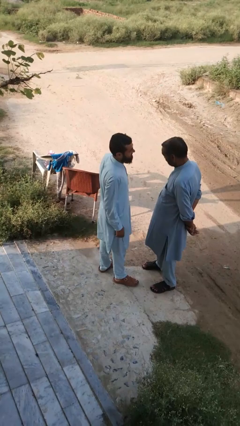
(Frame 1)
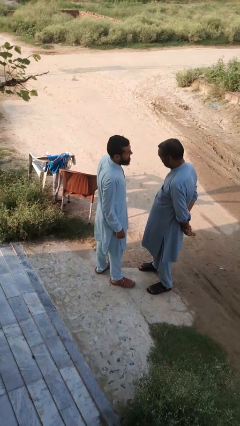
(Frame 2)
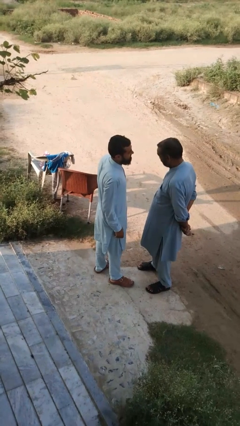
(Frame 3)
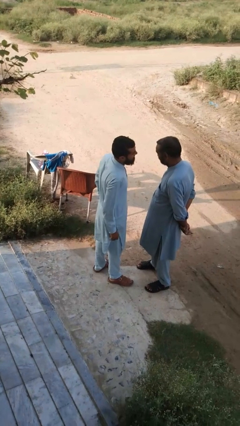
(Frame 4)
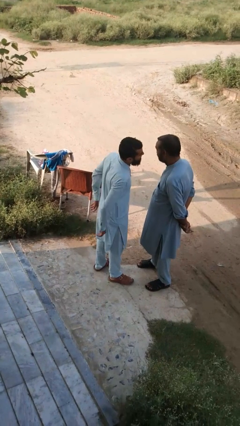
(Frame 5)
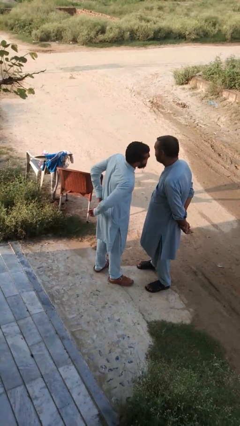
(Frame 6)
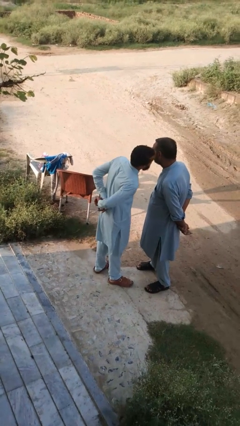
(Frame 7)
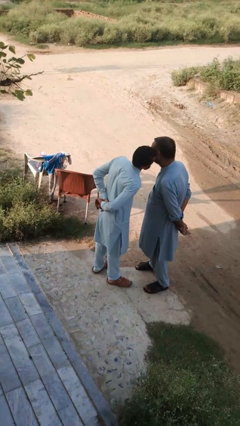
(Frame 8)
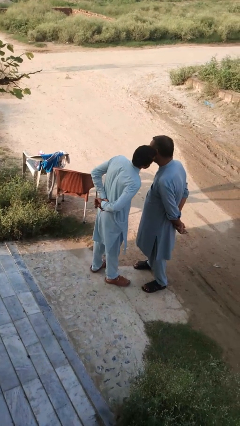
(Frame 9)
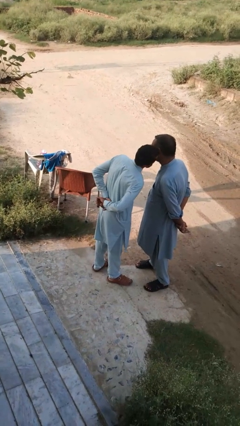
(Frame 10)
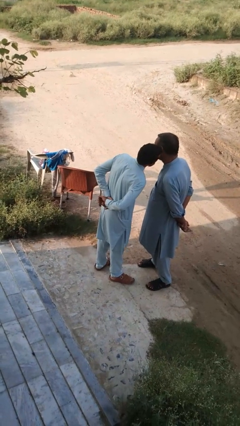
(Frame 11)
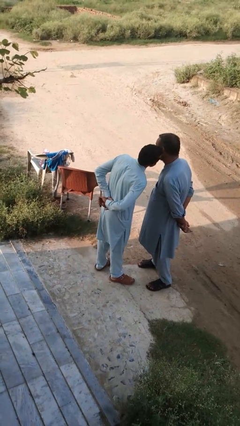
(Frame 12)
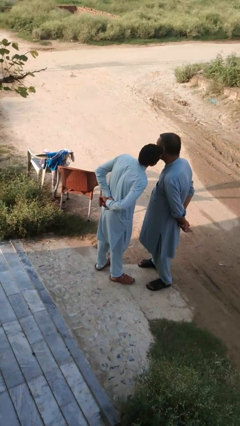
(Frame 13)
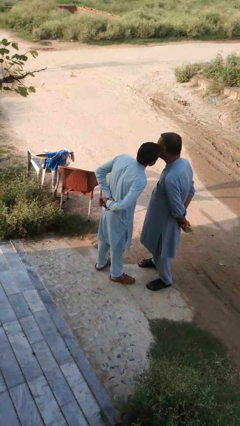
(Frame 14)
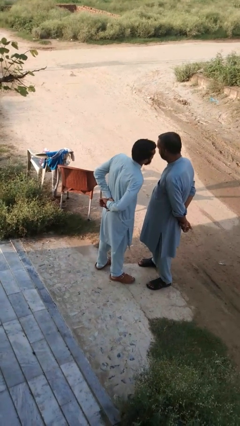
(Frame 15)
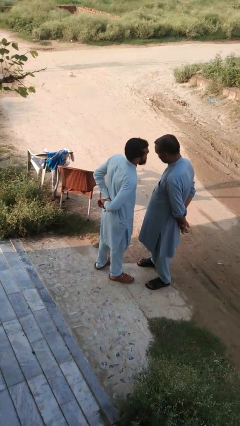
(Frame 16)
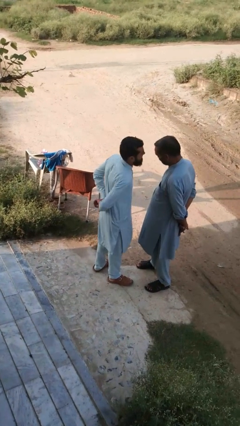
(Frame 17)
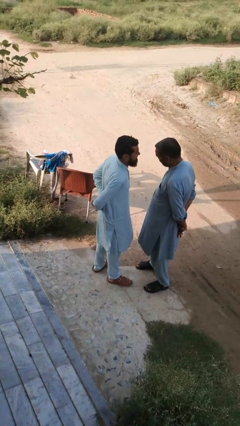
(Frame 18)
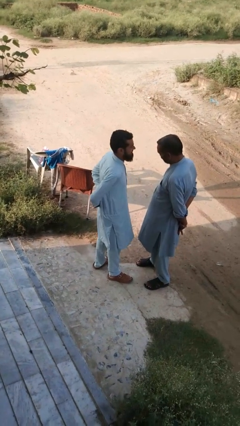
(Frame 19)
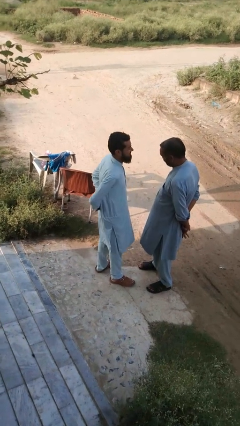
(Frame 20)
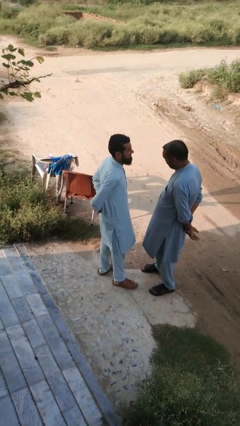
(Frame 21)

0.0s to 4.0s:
person kisses cheek of person

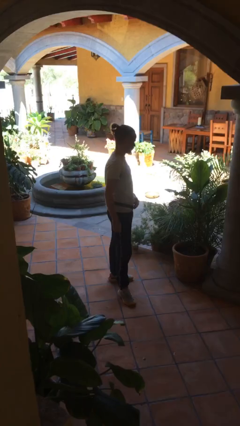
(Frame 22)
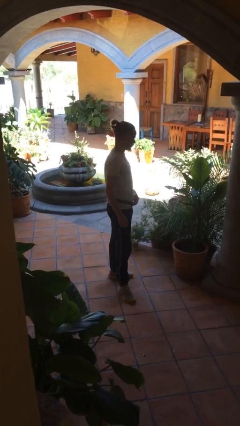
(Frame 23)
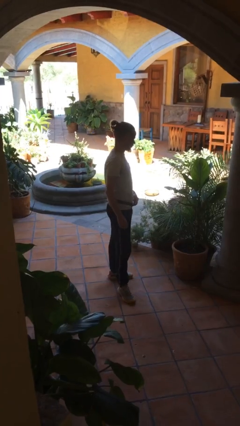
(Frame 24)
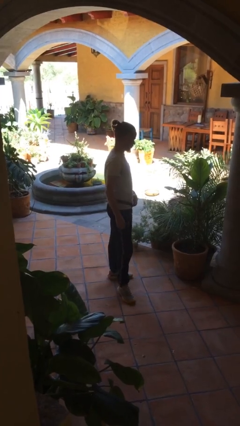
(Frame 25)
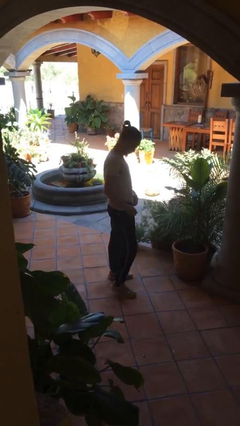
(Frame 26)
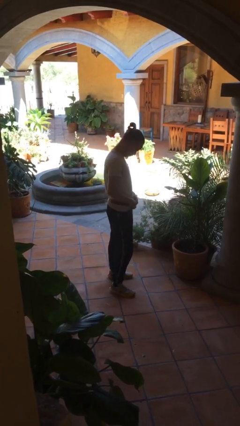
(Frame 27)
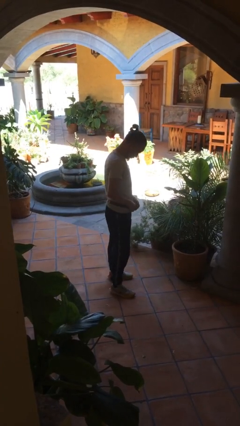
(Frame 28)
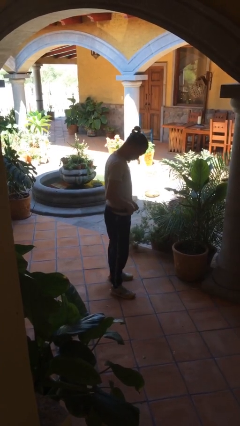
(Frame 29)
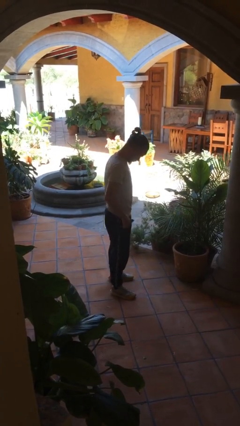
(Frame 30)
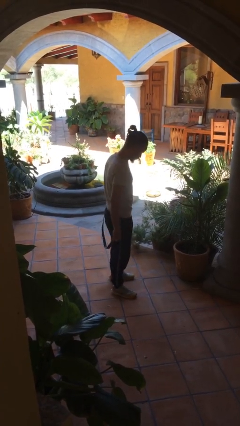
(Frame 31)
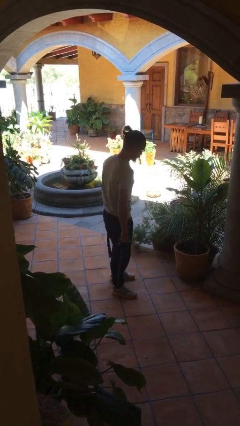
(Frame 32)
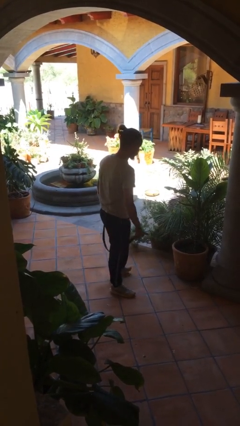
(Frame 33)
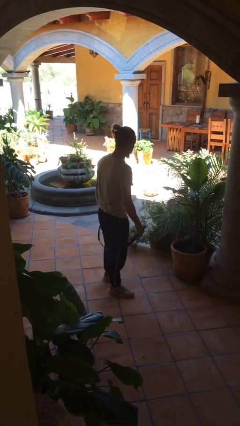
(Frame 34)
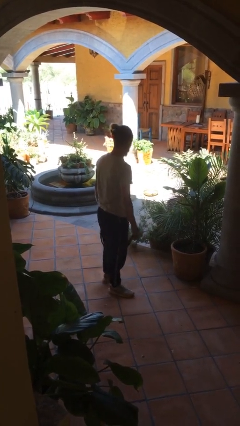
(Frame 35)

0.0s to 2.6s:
person takes off belt

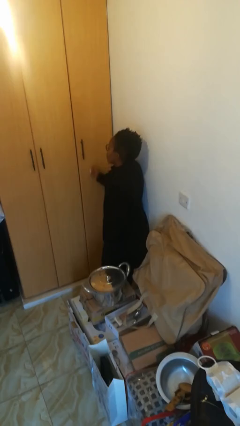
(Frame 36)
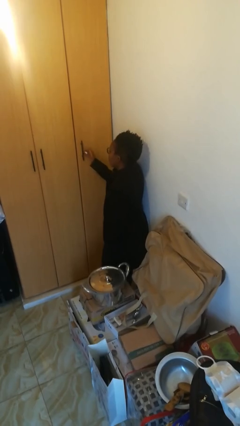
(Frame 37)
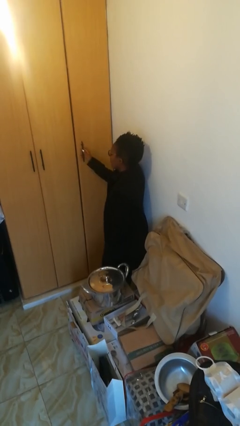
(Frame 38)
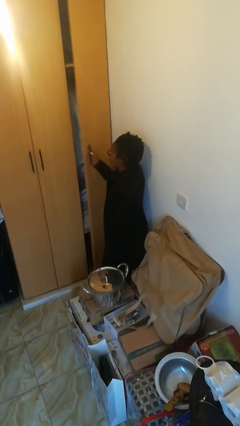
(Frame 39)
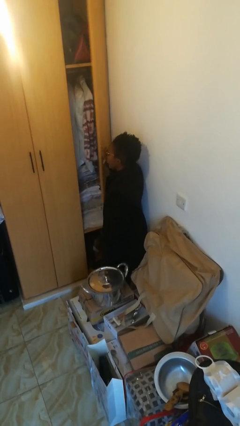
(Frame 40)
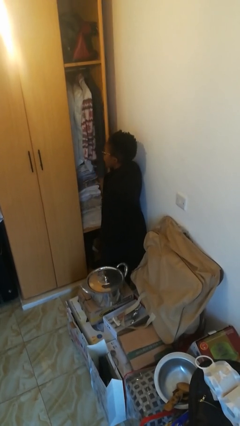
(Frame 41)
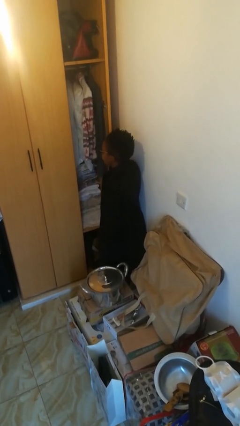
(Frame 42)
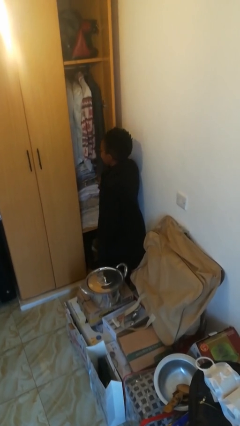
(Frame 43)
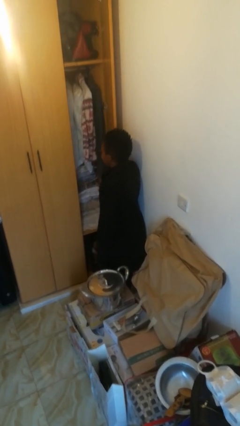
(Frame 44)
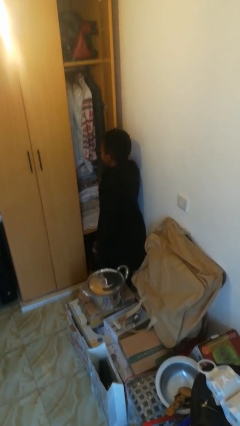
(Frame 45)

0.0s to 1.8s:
person opens closet door

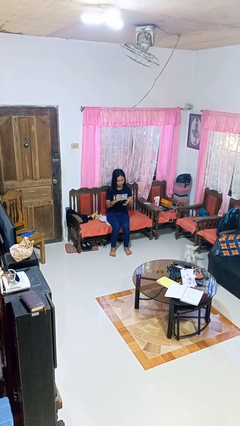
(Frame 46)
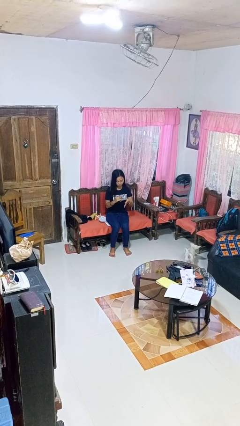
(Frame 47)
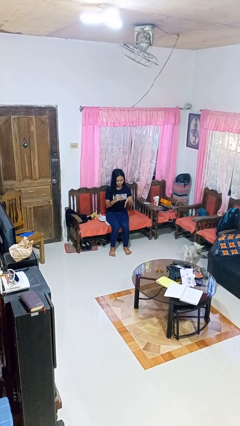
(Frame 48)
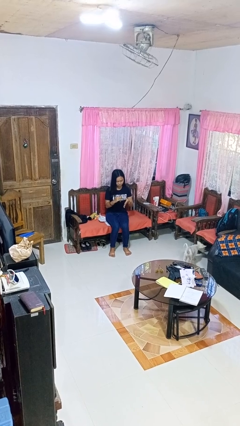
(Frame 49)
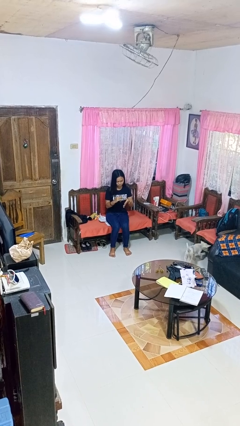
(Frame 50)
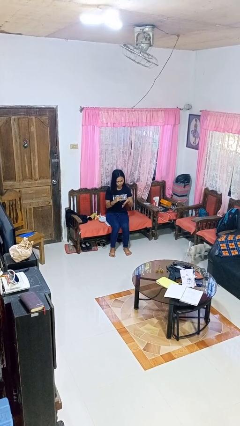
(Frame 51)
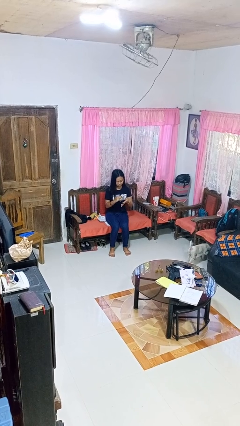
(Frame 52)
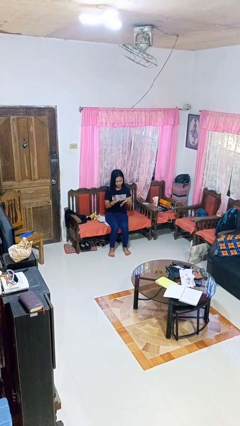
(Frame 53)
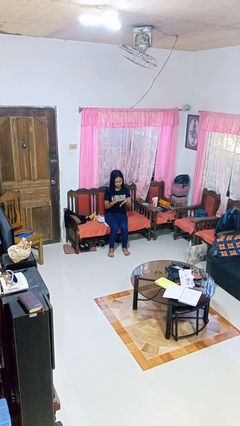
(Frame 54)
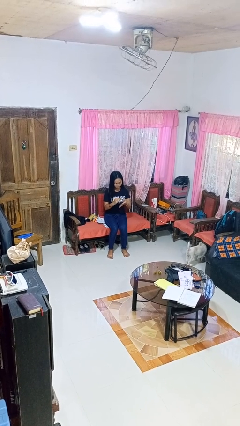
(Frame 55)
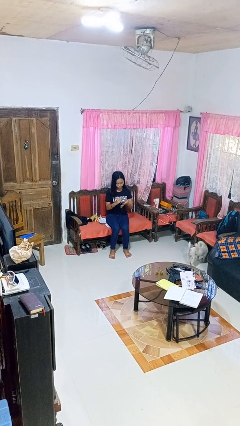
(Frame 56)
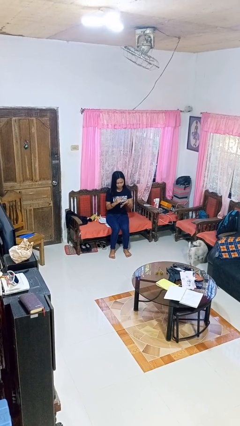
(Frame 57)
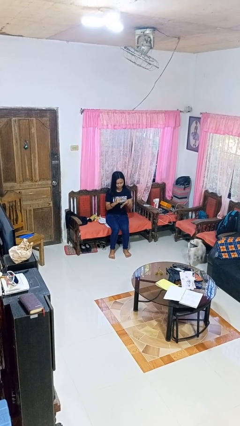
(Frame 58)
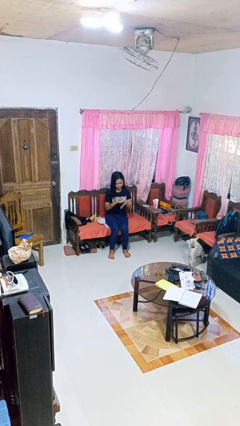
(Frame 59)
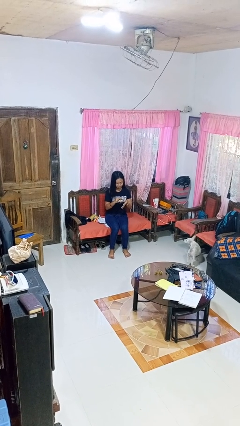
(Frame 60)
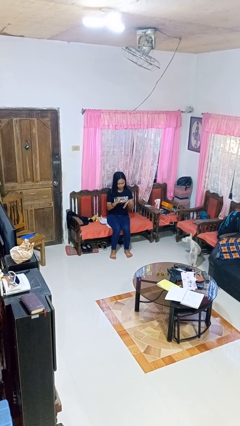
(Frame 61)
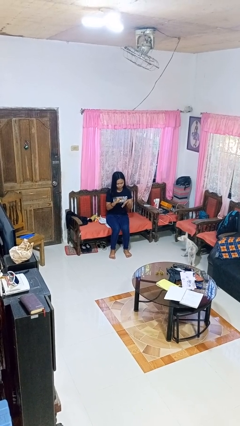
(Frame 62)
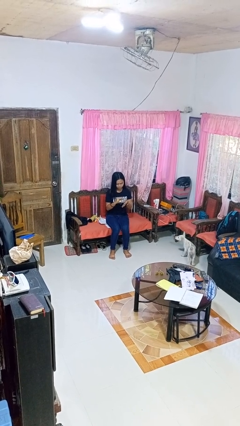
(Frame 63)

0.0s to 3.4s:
person clips fingernails

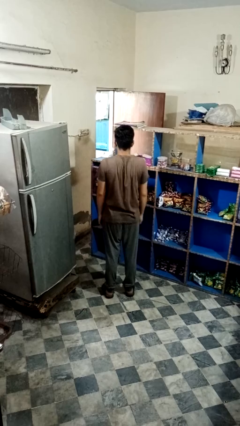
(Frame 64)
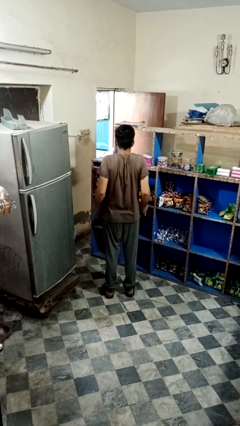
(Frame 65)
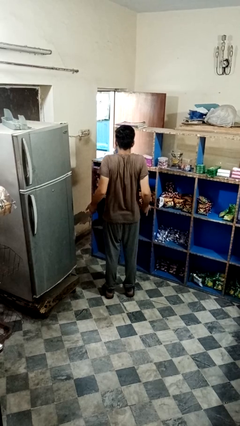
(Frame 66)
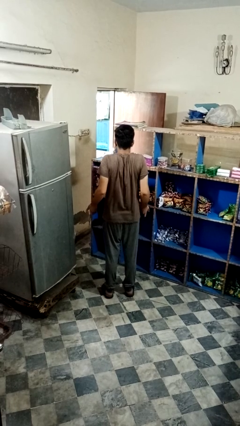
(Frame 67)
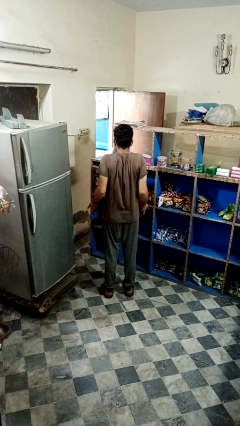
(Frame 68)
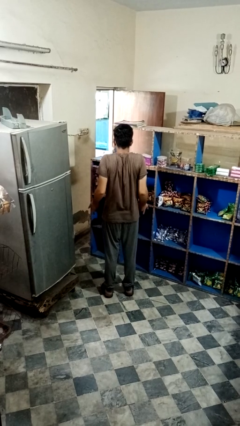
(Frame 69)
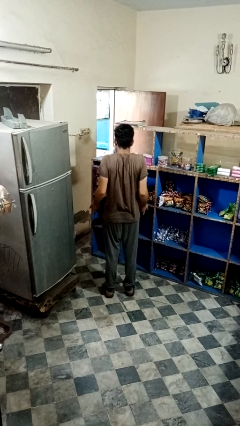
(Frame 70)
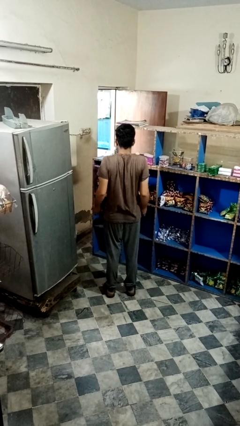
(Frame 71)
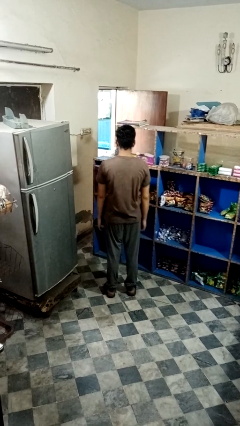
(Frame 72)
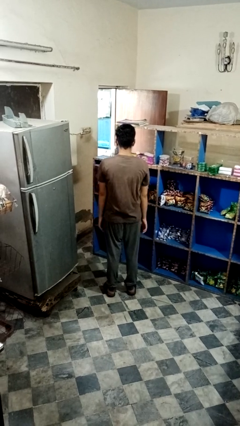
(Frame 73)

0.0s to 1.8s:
person shrugs

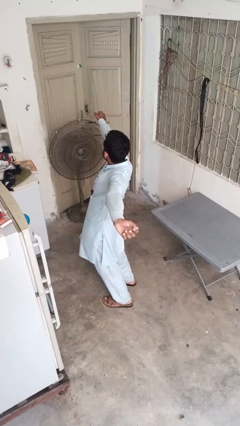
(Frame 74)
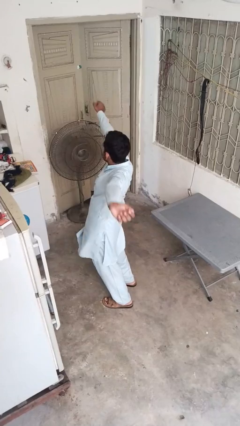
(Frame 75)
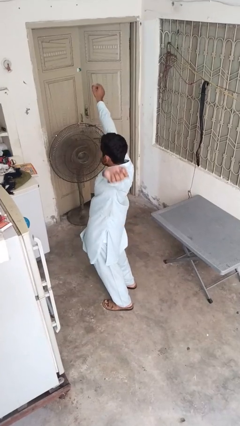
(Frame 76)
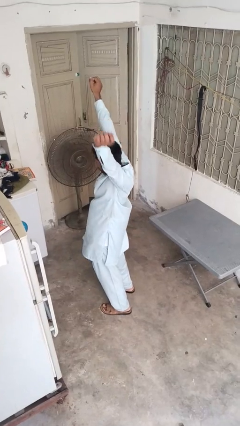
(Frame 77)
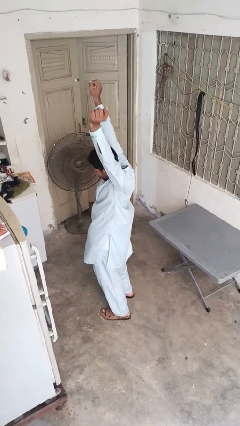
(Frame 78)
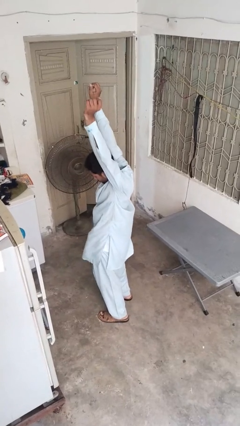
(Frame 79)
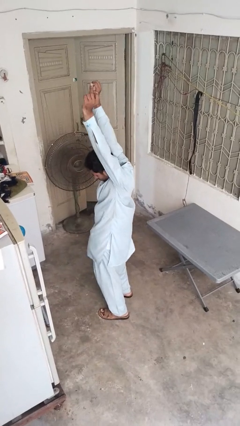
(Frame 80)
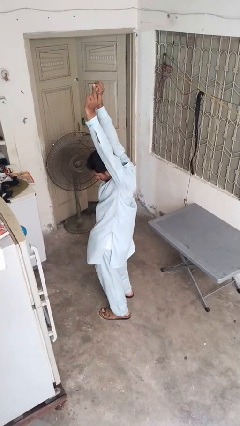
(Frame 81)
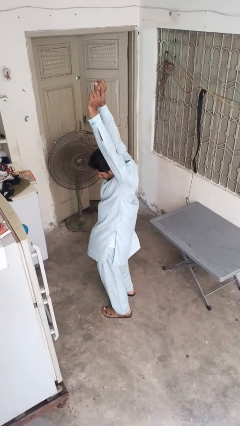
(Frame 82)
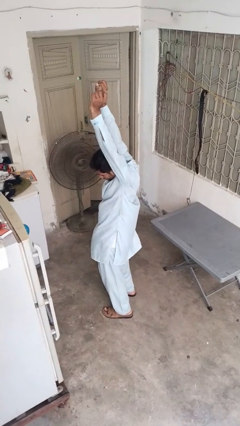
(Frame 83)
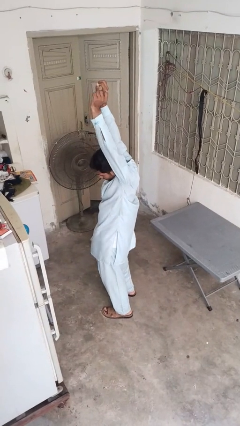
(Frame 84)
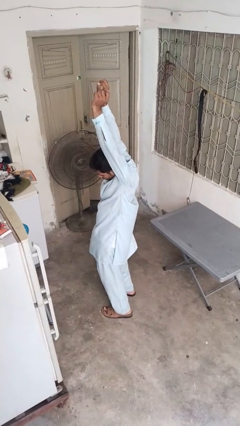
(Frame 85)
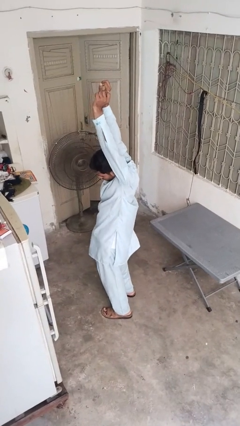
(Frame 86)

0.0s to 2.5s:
person stretches arms over head

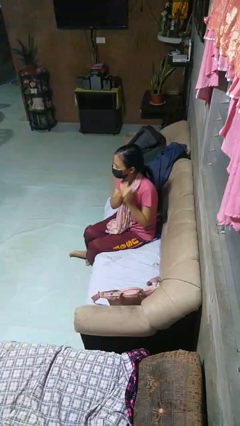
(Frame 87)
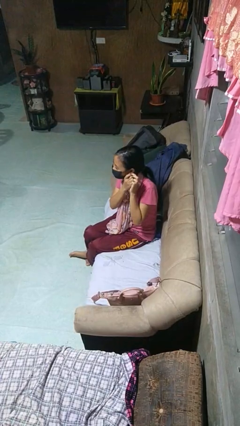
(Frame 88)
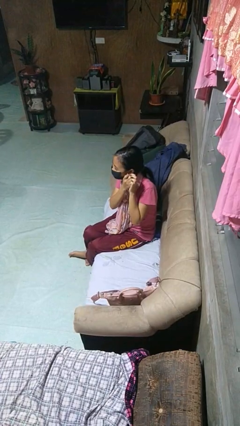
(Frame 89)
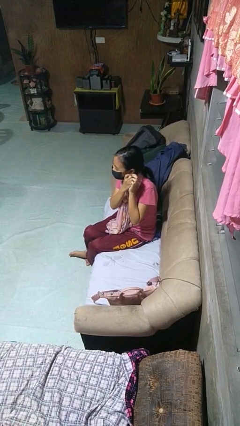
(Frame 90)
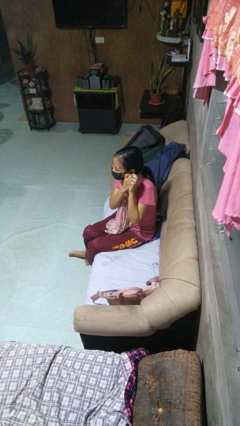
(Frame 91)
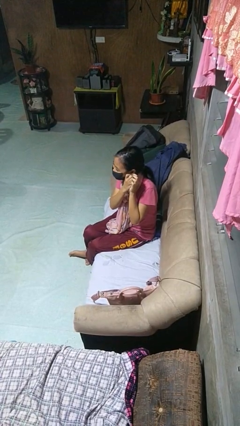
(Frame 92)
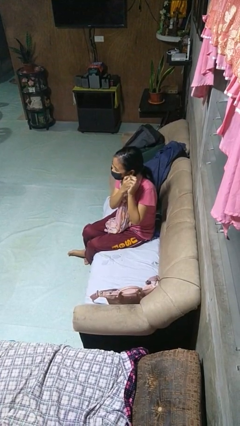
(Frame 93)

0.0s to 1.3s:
person takes off earrings

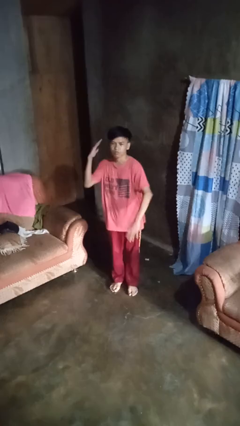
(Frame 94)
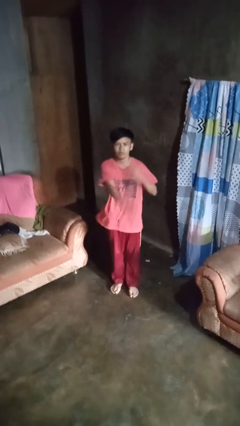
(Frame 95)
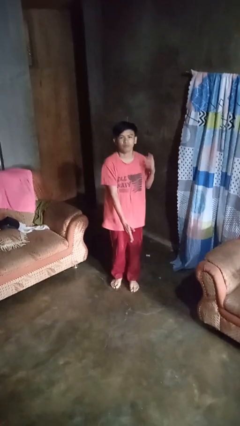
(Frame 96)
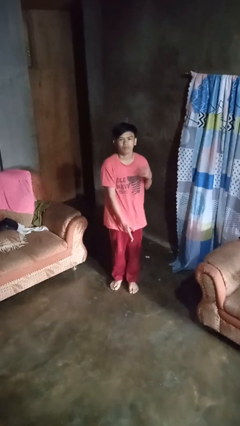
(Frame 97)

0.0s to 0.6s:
person karate chop
